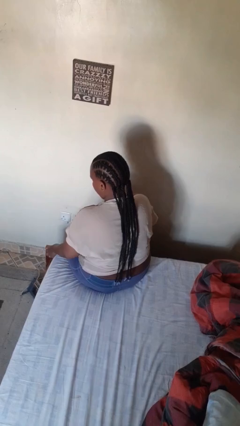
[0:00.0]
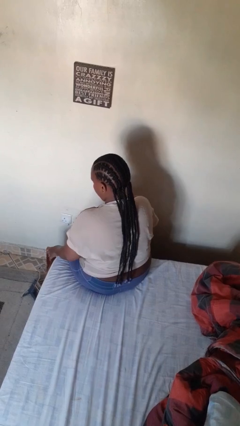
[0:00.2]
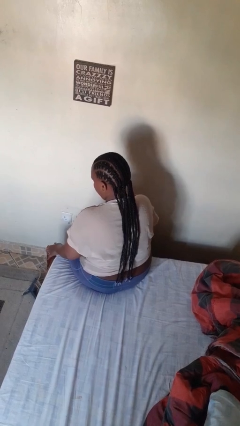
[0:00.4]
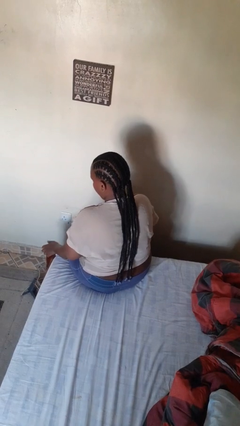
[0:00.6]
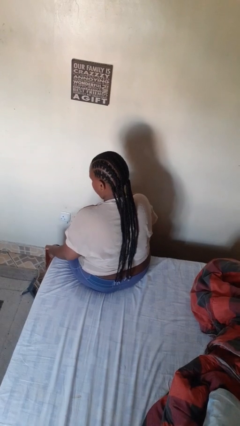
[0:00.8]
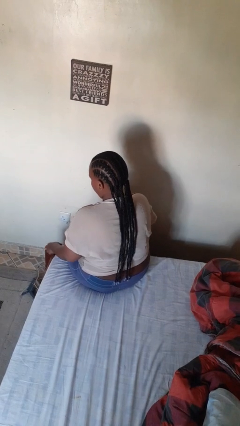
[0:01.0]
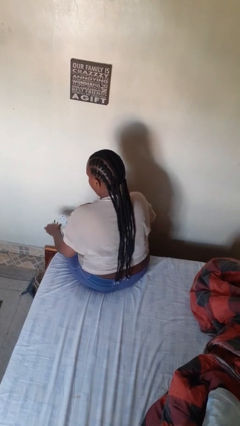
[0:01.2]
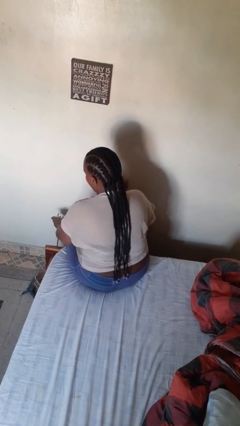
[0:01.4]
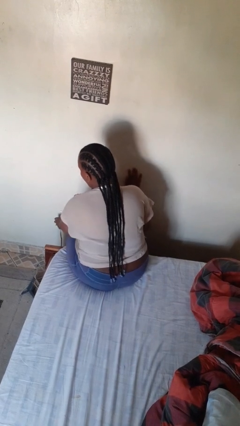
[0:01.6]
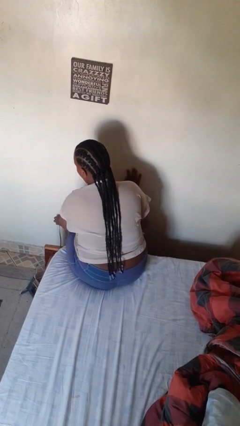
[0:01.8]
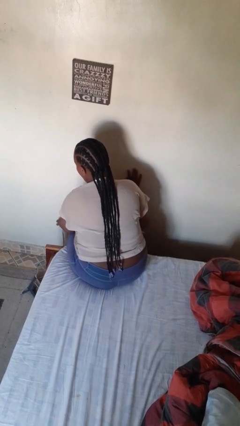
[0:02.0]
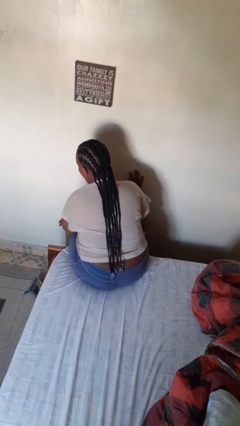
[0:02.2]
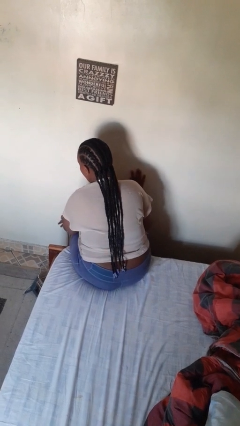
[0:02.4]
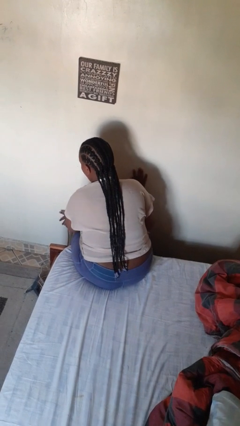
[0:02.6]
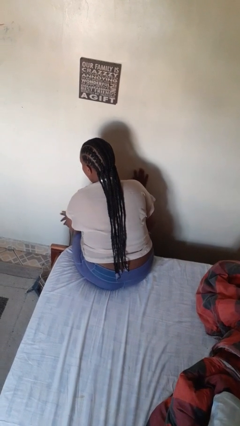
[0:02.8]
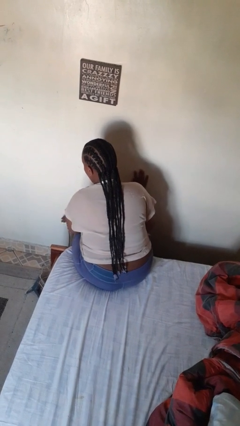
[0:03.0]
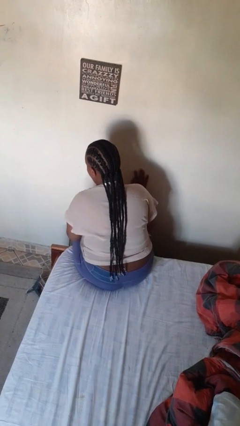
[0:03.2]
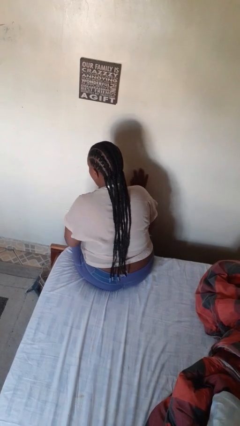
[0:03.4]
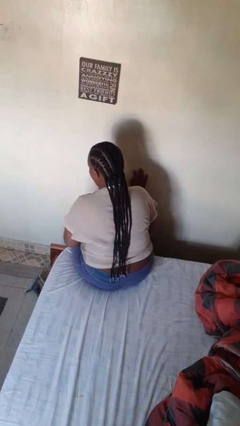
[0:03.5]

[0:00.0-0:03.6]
person plugs into electrical socket

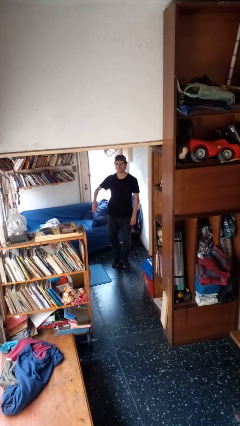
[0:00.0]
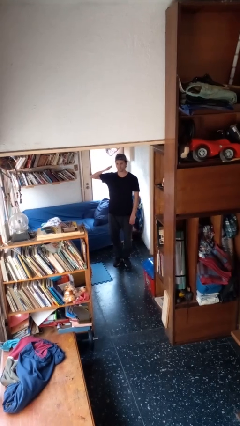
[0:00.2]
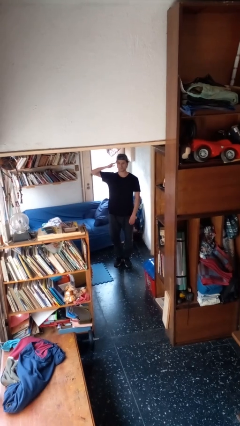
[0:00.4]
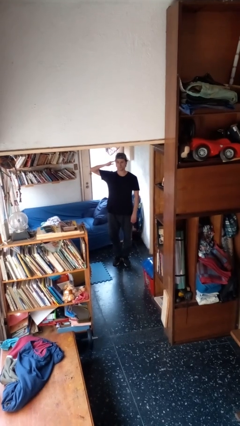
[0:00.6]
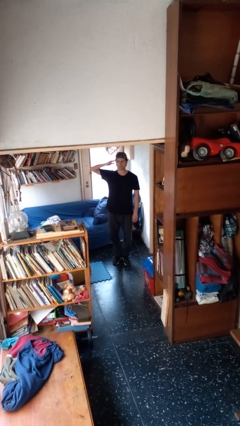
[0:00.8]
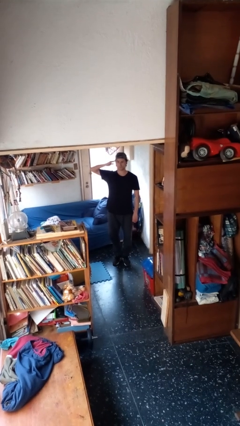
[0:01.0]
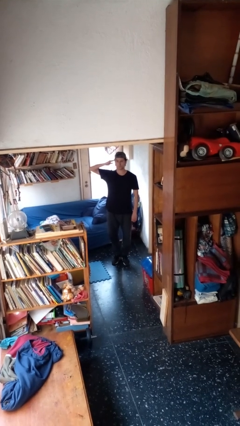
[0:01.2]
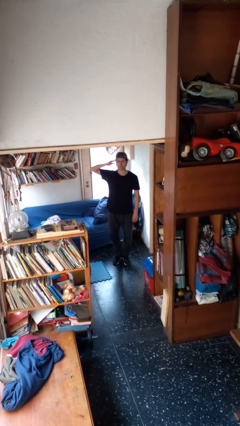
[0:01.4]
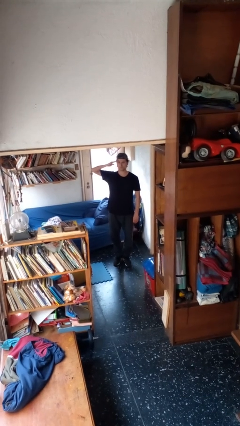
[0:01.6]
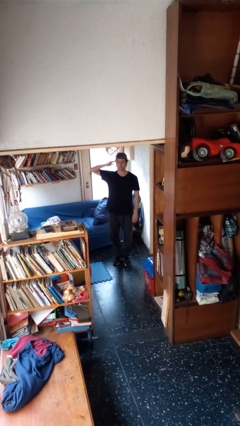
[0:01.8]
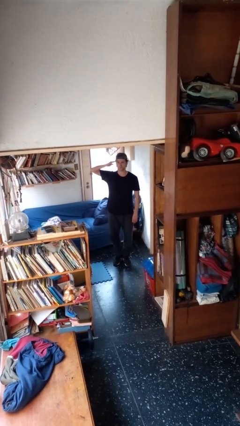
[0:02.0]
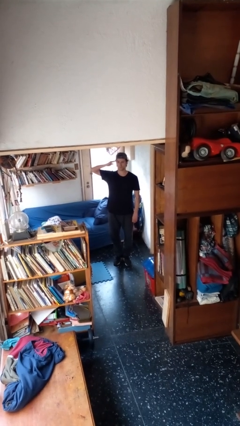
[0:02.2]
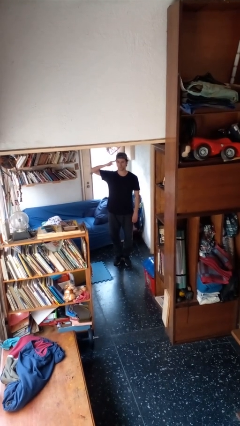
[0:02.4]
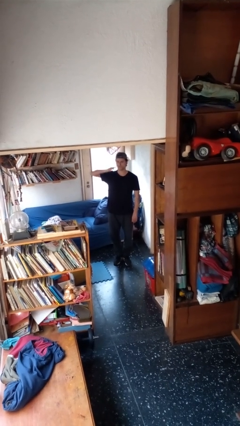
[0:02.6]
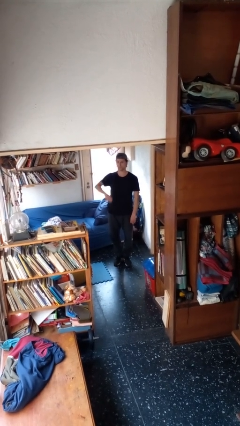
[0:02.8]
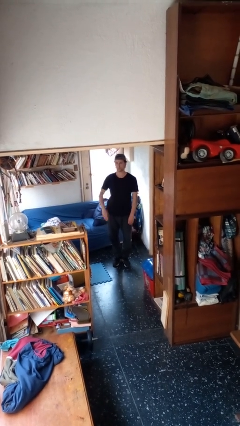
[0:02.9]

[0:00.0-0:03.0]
person salutes

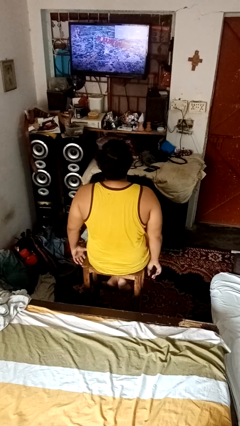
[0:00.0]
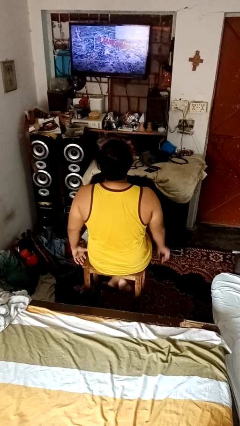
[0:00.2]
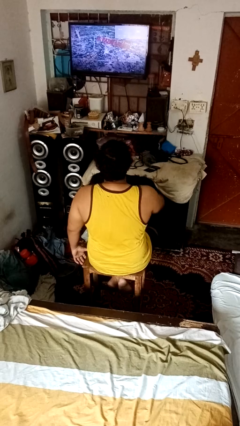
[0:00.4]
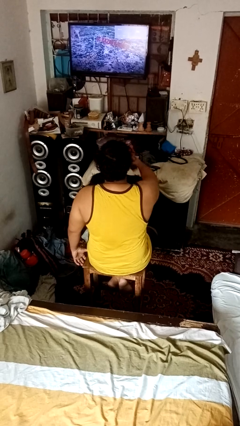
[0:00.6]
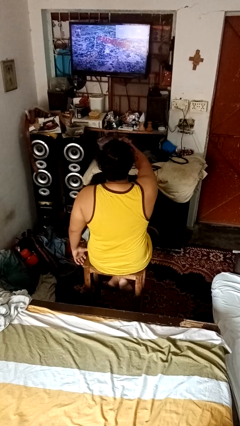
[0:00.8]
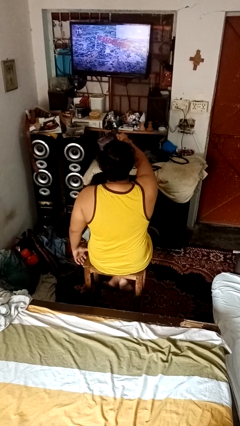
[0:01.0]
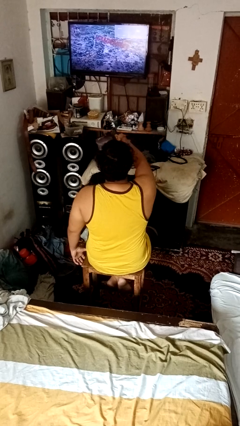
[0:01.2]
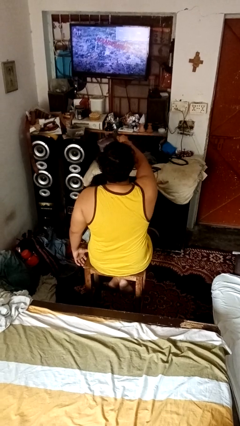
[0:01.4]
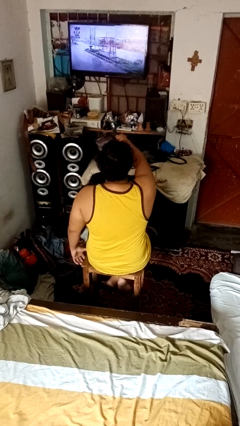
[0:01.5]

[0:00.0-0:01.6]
person uses television remote

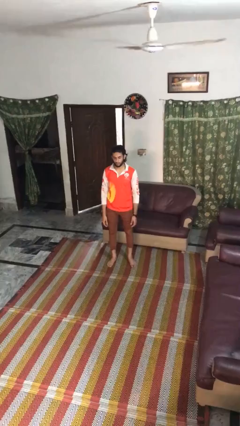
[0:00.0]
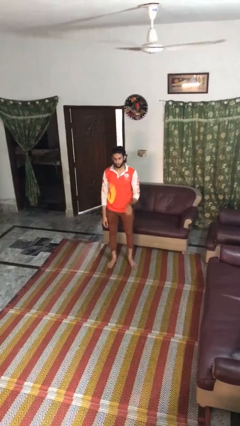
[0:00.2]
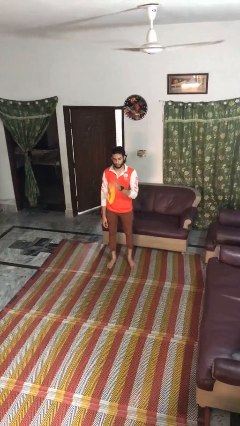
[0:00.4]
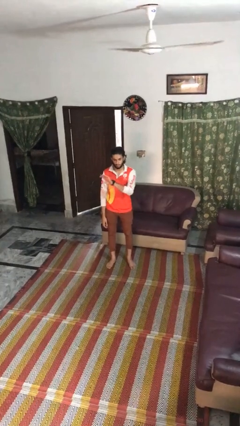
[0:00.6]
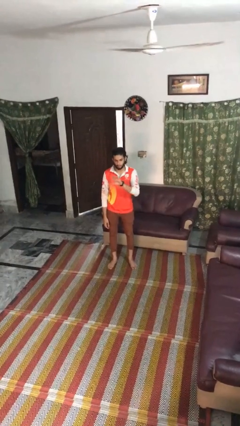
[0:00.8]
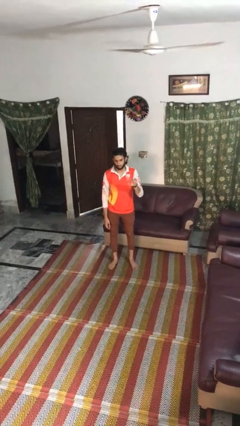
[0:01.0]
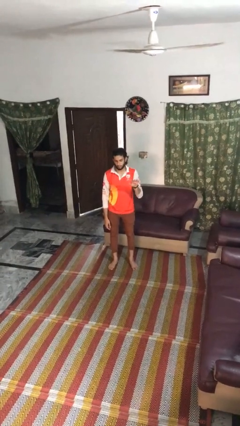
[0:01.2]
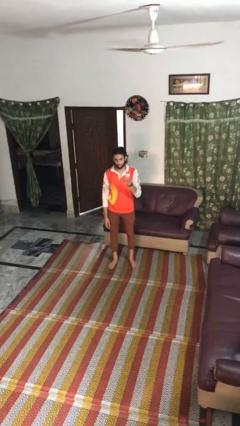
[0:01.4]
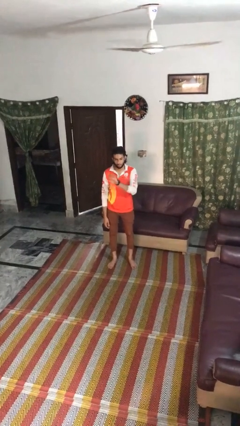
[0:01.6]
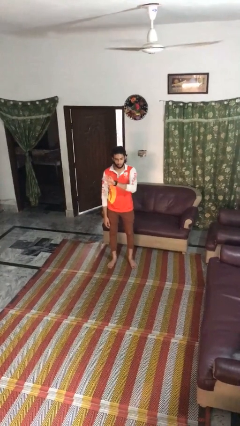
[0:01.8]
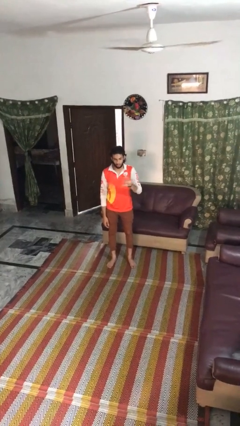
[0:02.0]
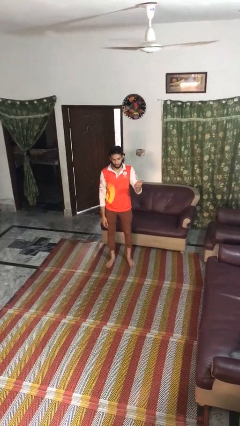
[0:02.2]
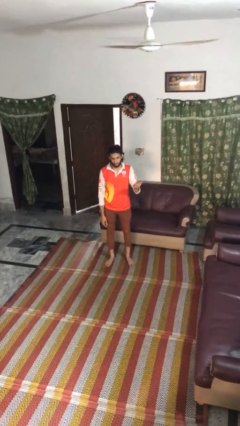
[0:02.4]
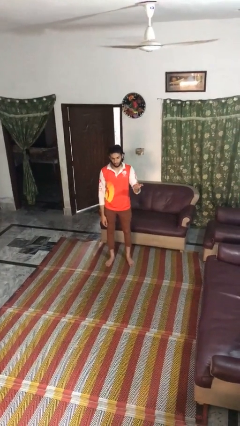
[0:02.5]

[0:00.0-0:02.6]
person gestures swipe left

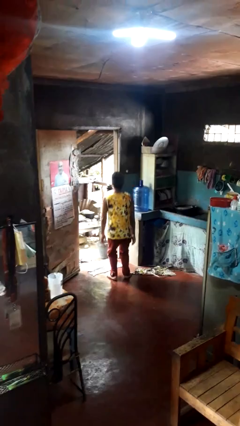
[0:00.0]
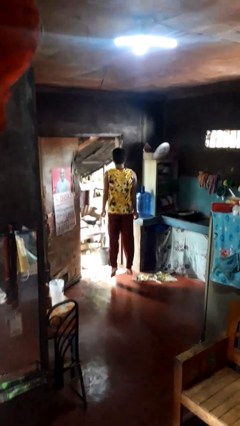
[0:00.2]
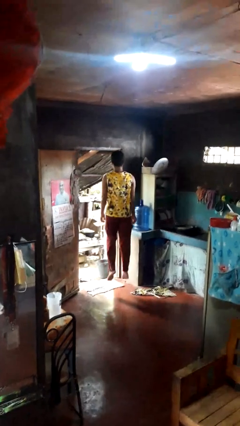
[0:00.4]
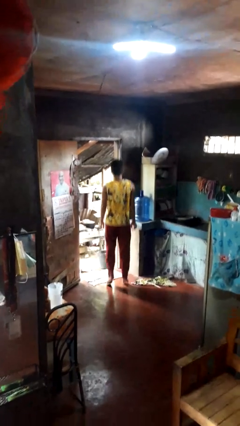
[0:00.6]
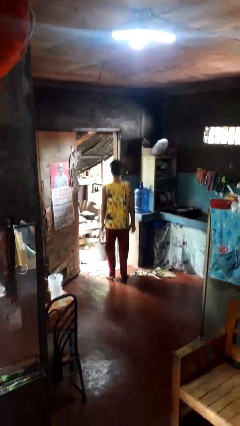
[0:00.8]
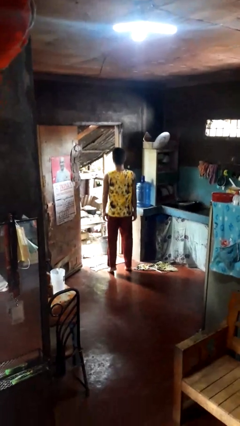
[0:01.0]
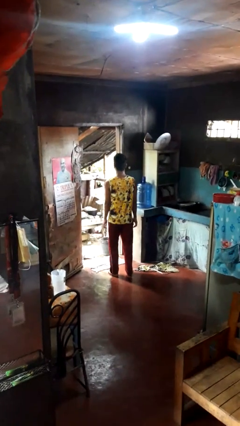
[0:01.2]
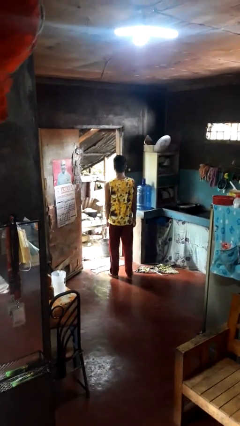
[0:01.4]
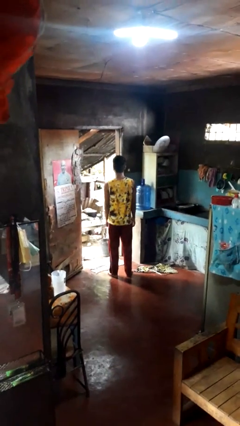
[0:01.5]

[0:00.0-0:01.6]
person jumps

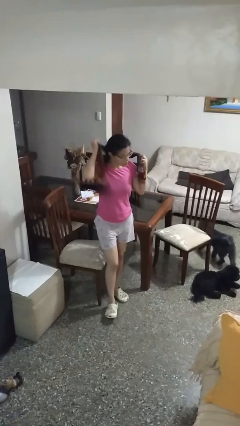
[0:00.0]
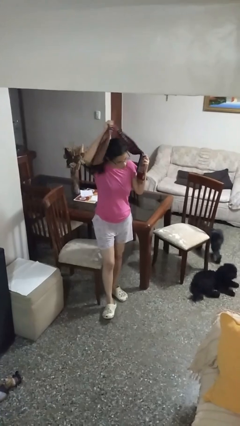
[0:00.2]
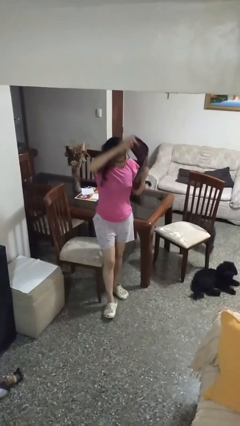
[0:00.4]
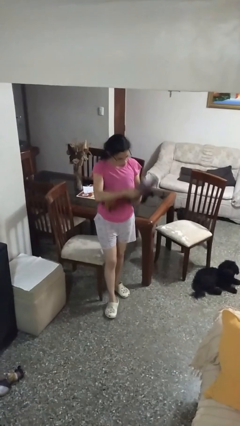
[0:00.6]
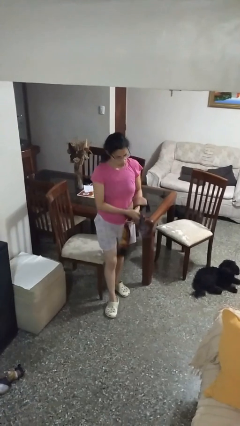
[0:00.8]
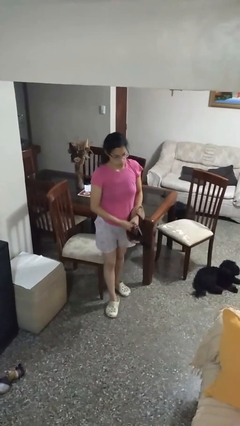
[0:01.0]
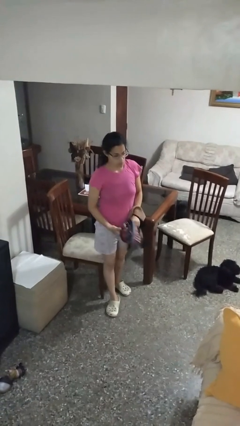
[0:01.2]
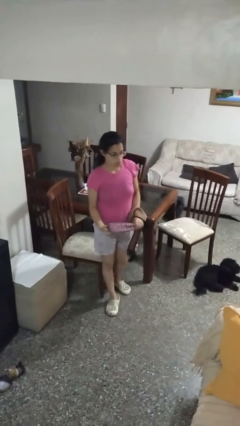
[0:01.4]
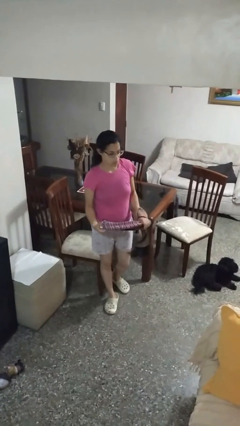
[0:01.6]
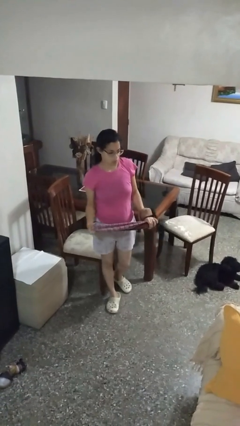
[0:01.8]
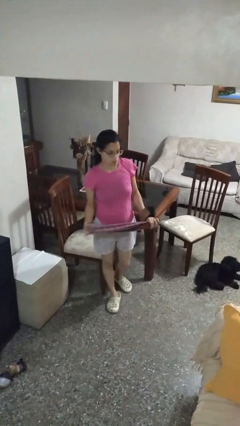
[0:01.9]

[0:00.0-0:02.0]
person takes off scarf

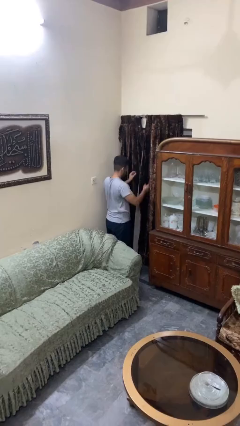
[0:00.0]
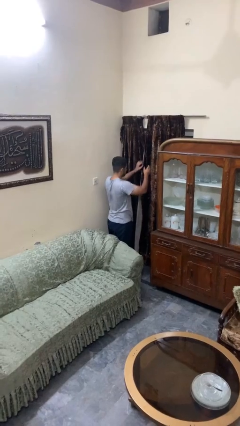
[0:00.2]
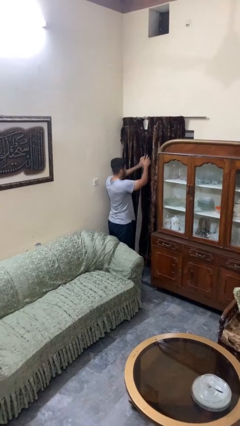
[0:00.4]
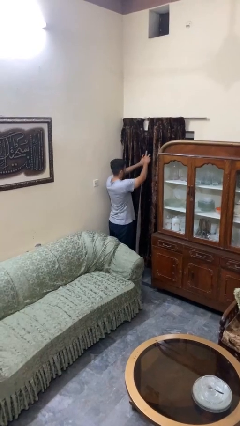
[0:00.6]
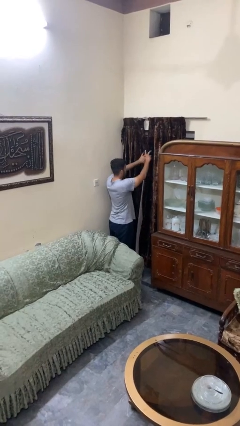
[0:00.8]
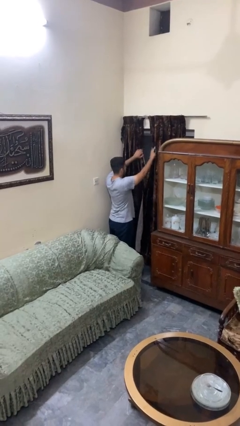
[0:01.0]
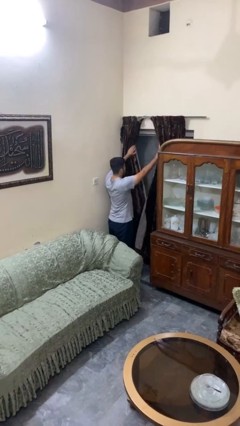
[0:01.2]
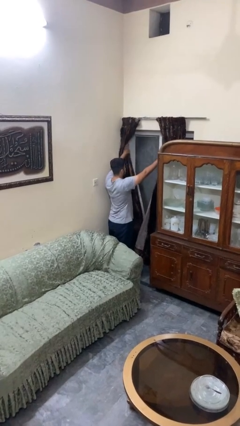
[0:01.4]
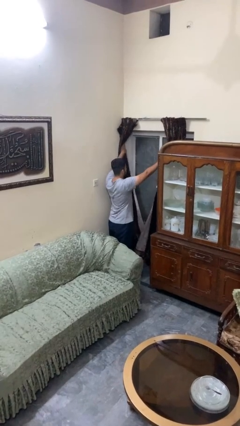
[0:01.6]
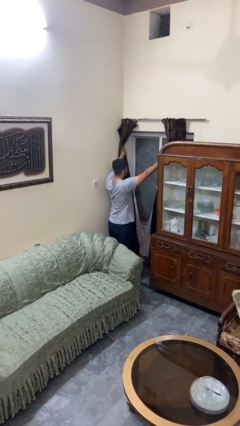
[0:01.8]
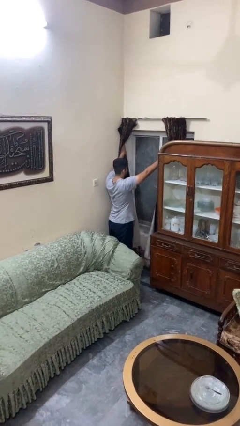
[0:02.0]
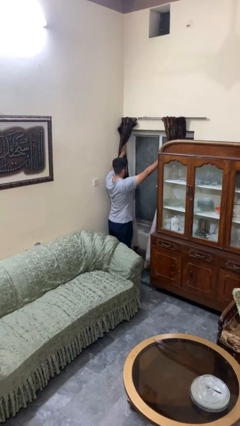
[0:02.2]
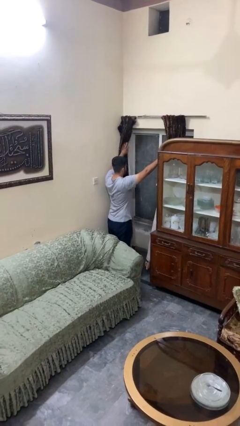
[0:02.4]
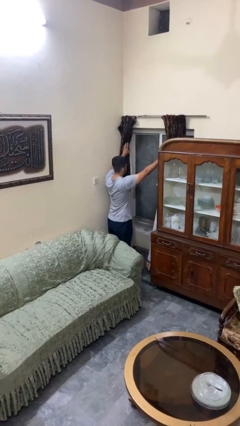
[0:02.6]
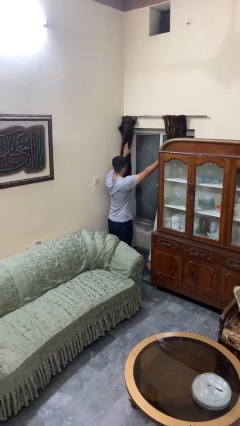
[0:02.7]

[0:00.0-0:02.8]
person opens curtains
